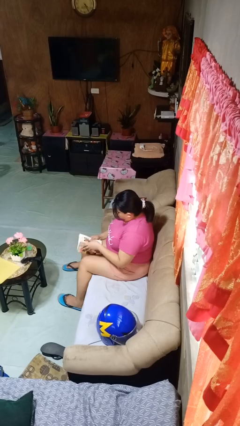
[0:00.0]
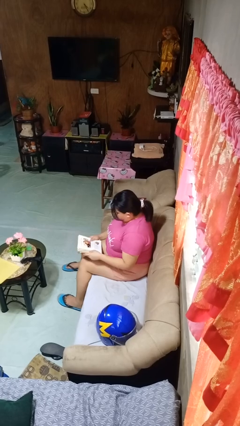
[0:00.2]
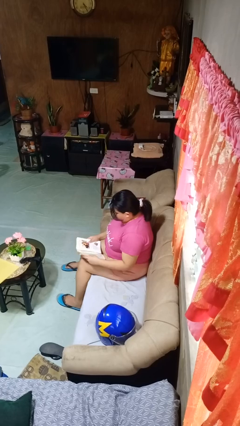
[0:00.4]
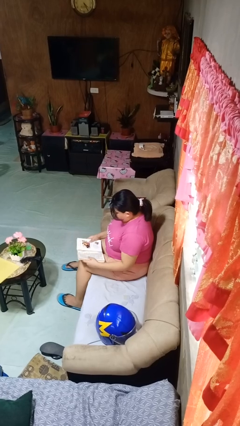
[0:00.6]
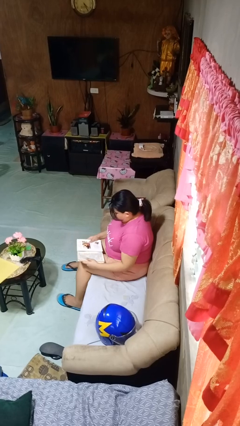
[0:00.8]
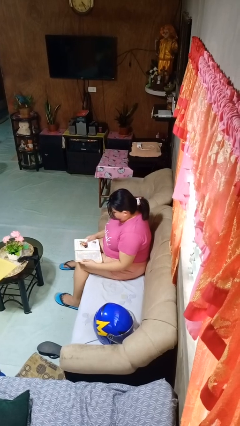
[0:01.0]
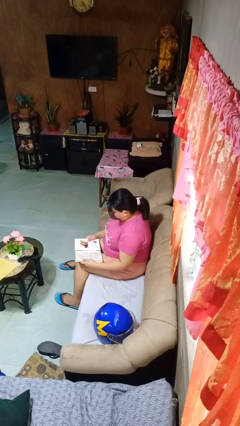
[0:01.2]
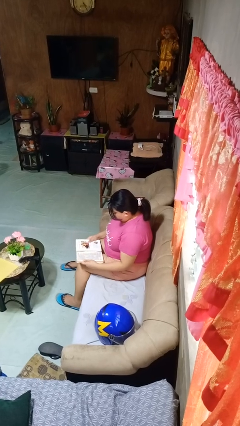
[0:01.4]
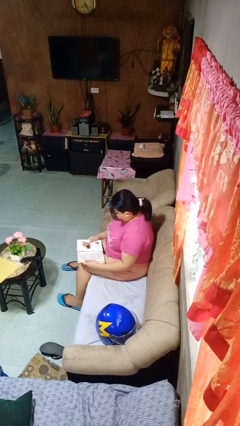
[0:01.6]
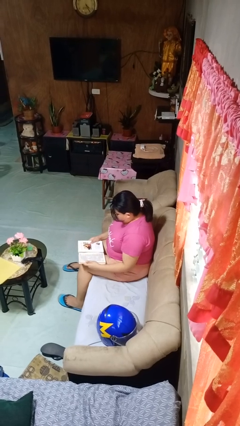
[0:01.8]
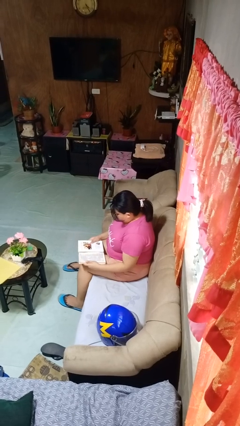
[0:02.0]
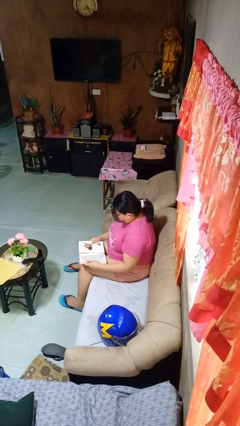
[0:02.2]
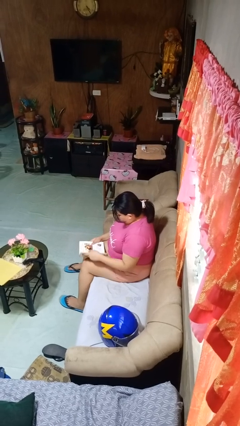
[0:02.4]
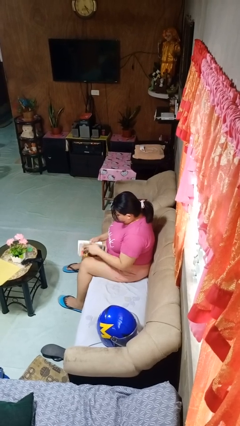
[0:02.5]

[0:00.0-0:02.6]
person reads book

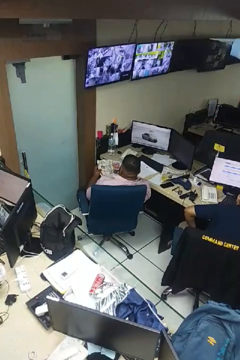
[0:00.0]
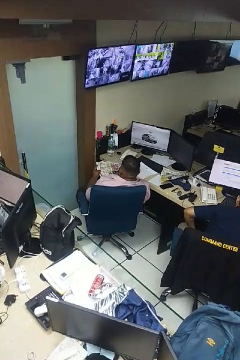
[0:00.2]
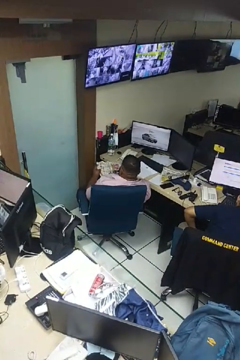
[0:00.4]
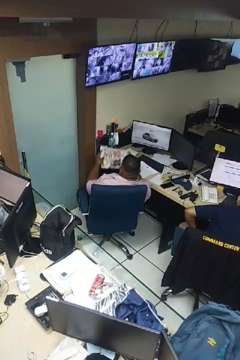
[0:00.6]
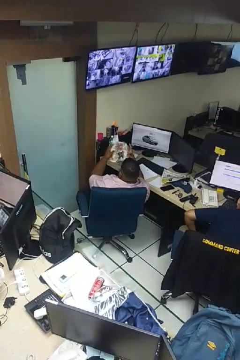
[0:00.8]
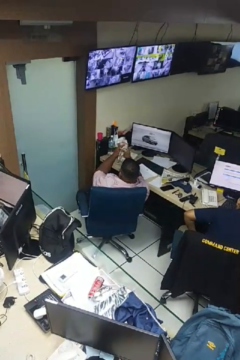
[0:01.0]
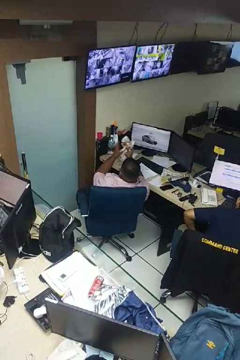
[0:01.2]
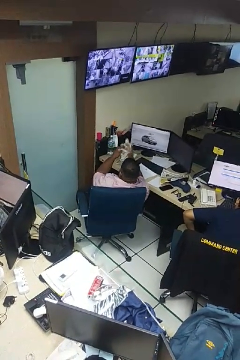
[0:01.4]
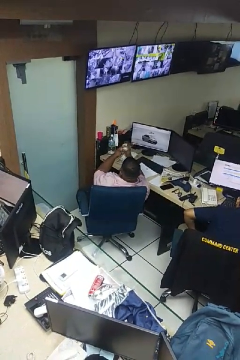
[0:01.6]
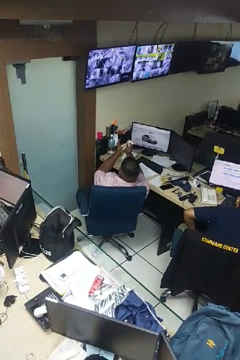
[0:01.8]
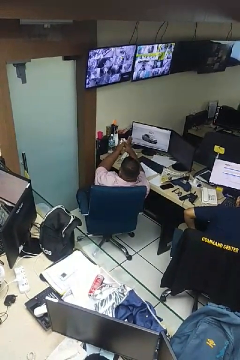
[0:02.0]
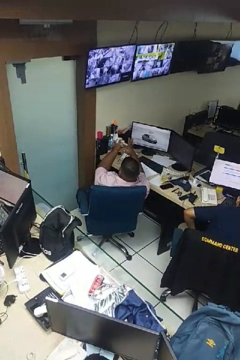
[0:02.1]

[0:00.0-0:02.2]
person crumples paper

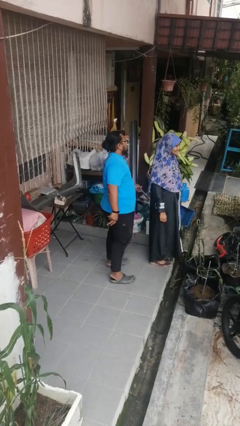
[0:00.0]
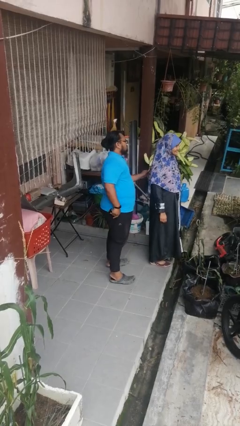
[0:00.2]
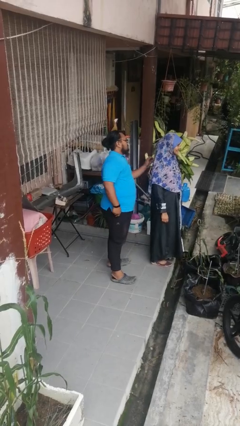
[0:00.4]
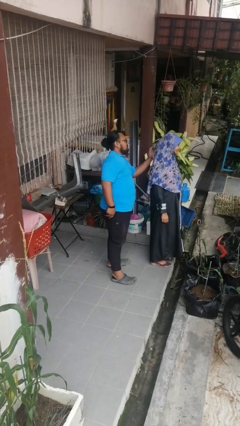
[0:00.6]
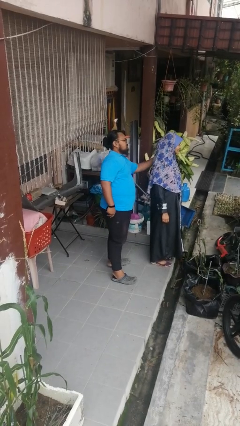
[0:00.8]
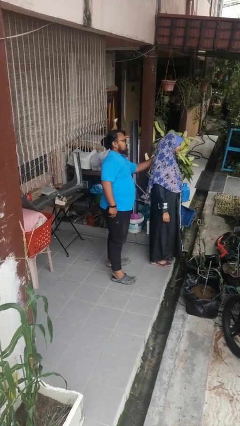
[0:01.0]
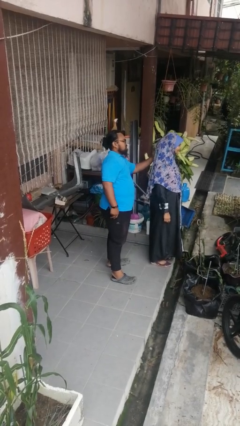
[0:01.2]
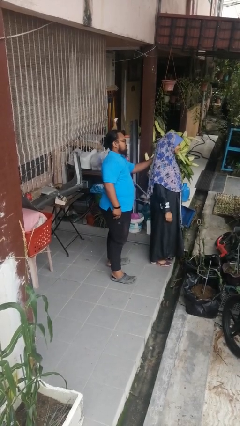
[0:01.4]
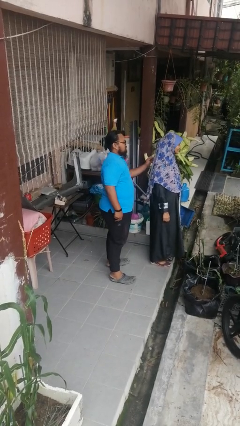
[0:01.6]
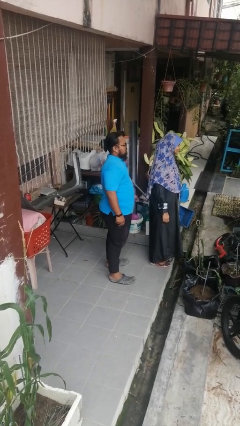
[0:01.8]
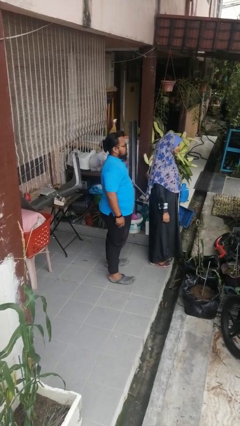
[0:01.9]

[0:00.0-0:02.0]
person touches back of person

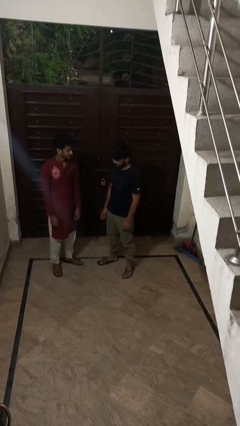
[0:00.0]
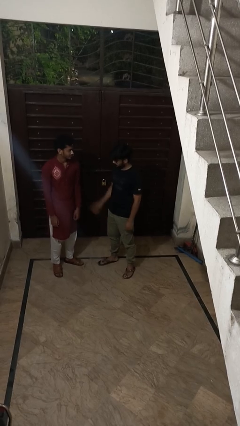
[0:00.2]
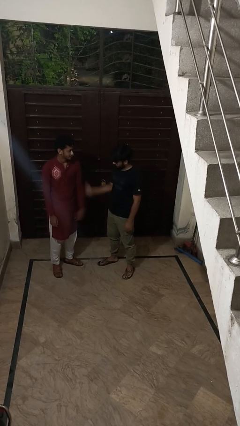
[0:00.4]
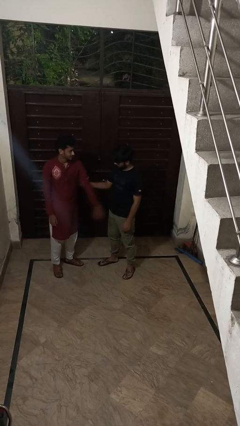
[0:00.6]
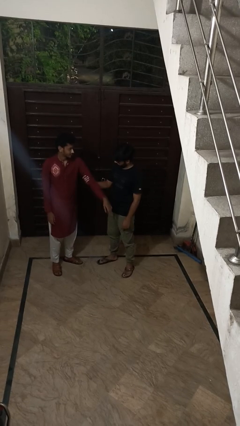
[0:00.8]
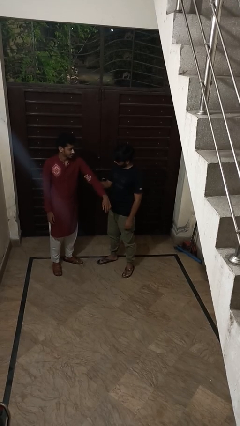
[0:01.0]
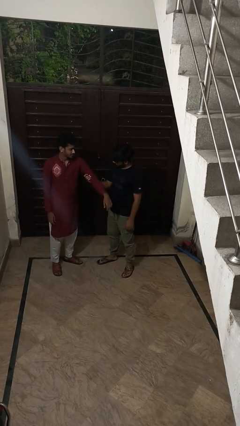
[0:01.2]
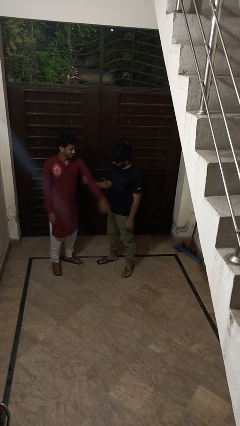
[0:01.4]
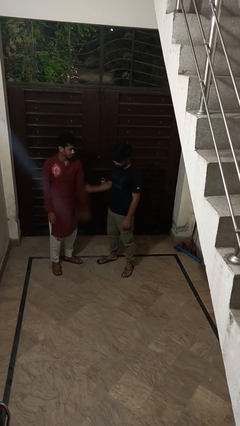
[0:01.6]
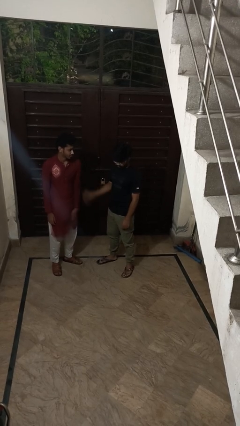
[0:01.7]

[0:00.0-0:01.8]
person grabs person by bicep

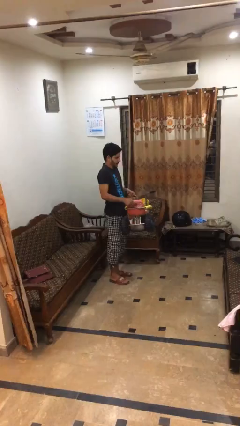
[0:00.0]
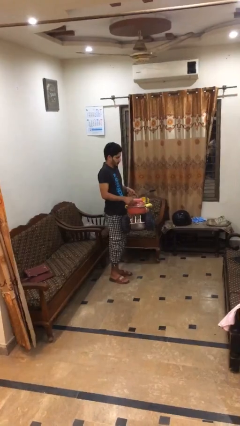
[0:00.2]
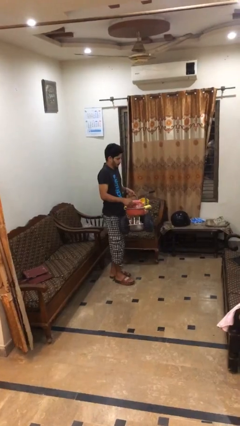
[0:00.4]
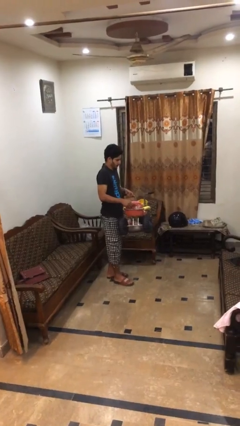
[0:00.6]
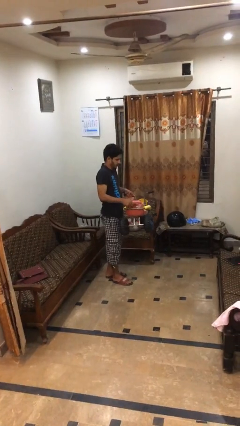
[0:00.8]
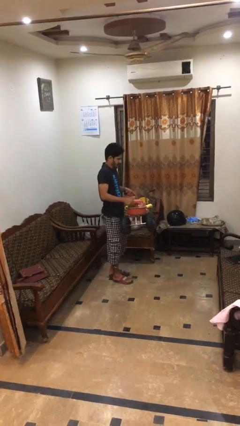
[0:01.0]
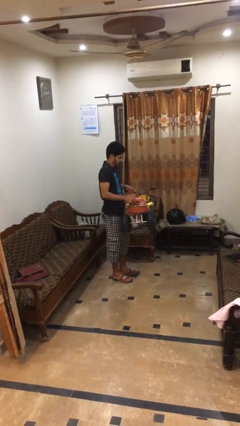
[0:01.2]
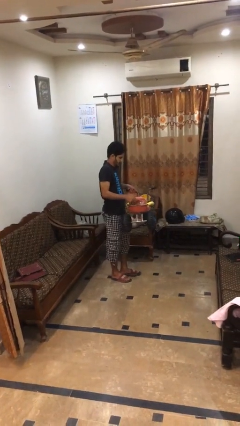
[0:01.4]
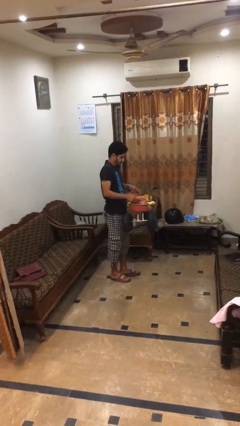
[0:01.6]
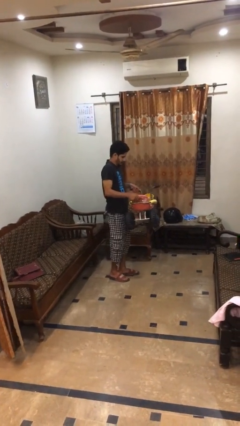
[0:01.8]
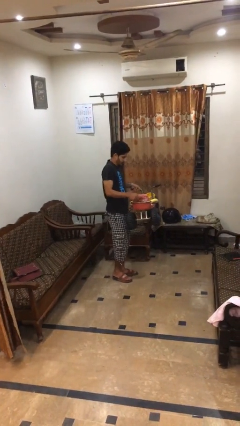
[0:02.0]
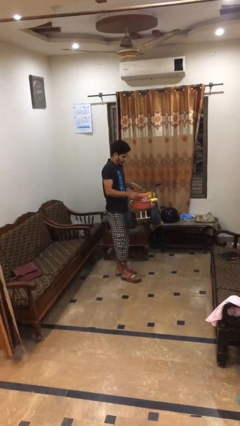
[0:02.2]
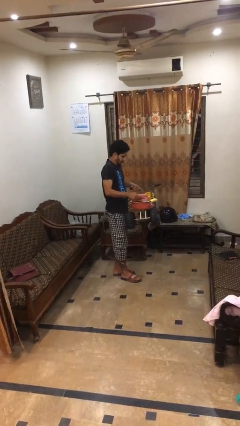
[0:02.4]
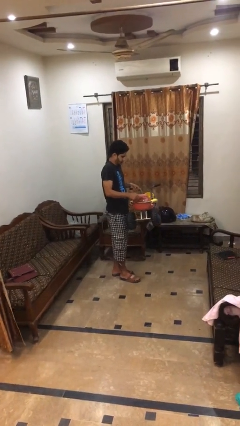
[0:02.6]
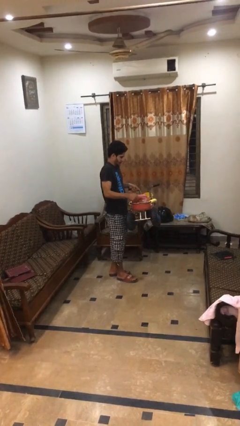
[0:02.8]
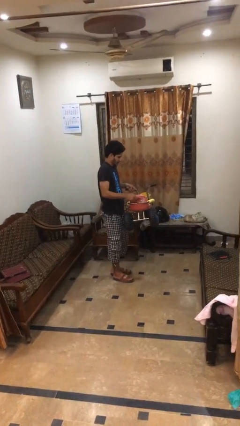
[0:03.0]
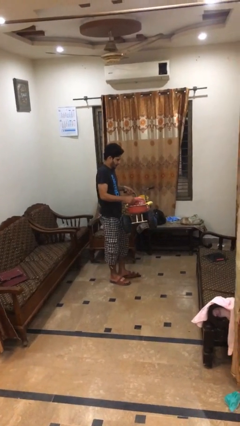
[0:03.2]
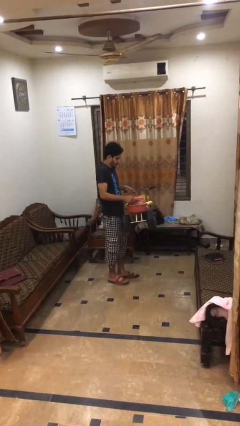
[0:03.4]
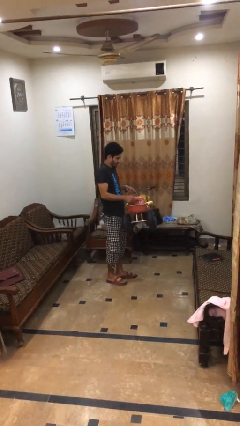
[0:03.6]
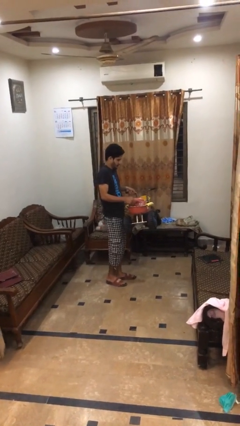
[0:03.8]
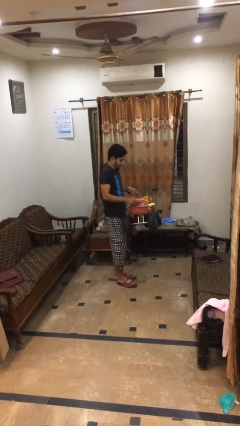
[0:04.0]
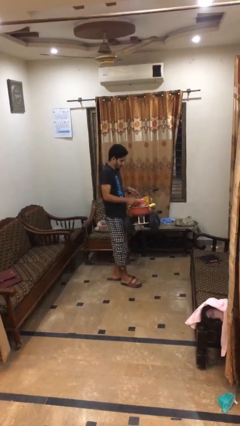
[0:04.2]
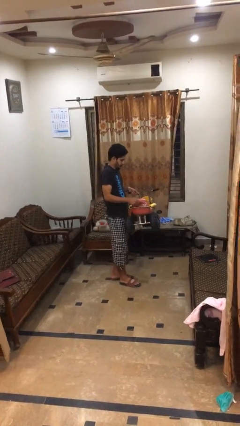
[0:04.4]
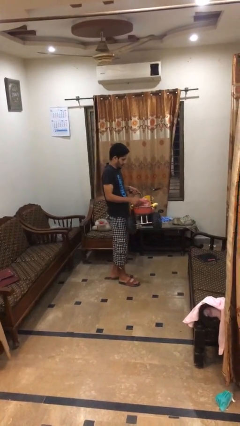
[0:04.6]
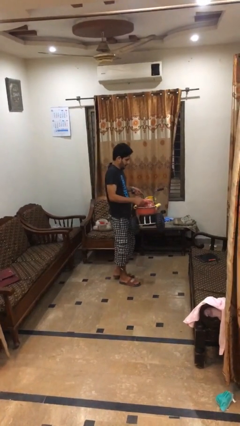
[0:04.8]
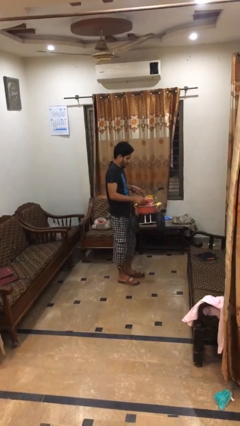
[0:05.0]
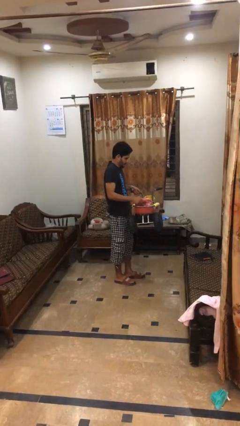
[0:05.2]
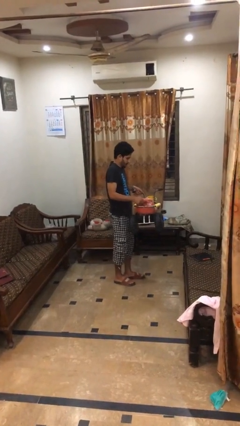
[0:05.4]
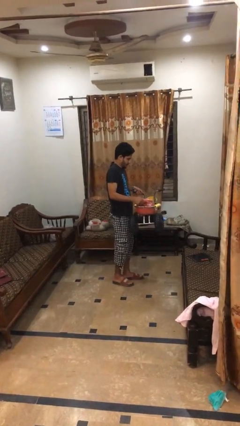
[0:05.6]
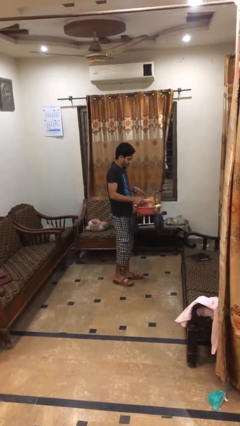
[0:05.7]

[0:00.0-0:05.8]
person carries heavy object

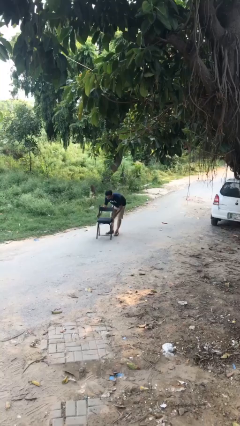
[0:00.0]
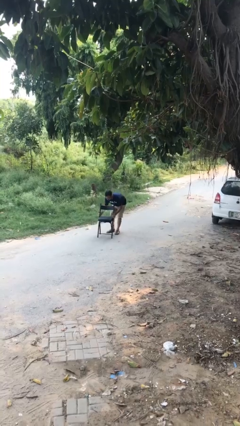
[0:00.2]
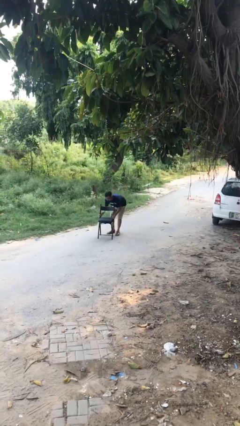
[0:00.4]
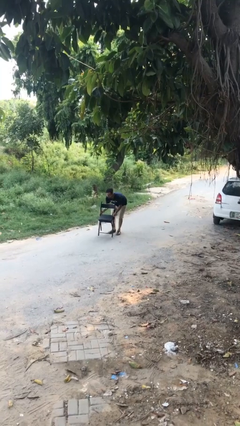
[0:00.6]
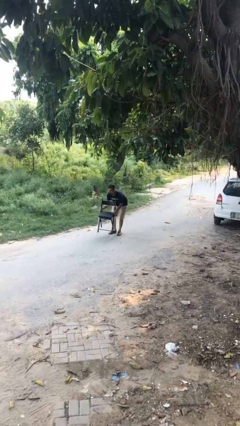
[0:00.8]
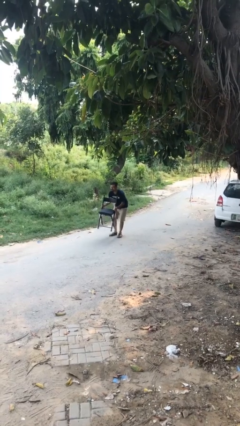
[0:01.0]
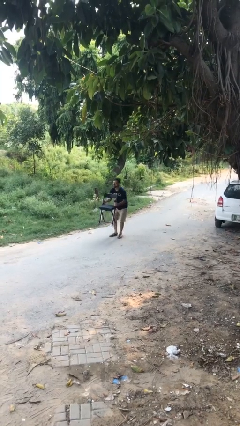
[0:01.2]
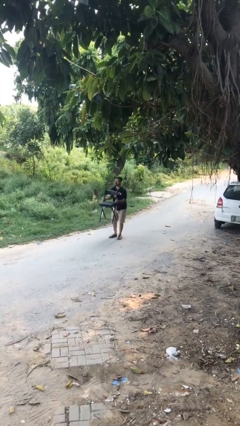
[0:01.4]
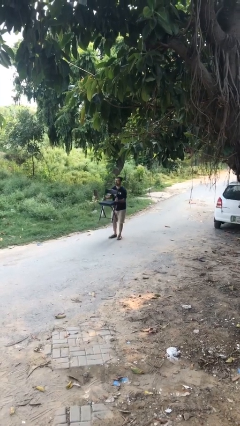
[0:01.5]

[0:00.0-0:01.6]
person picks up object from floor

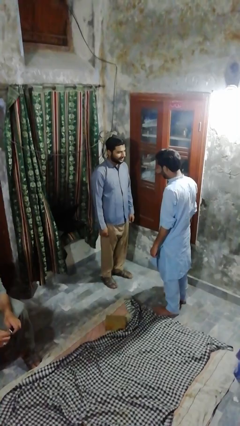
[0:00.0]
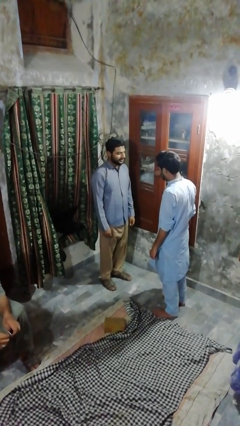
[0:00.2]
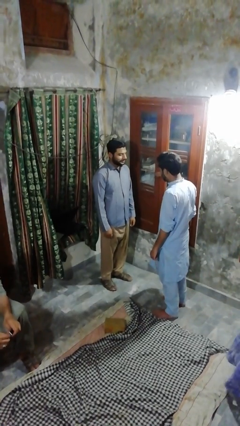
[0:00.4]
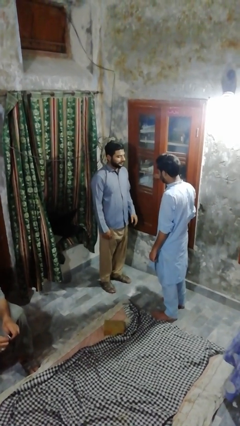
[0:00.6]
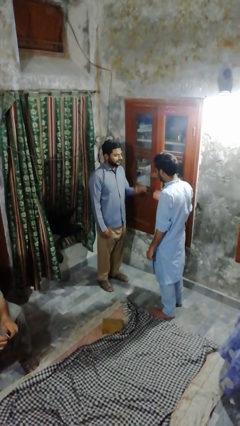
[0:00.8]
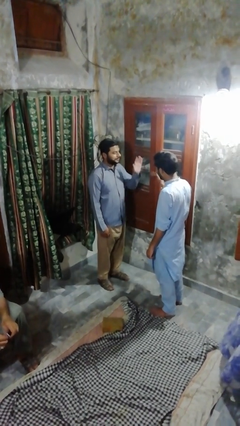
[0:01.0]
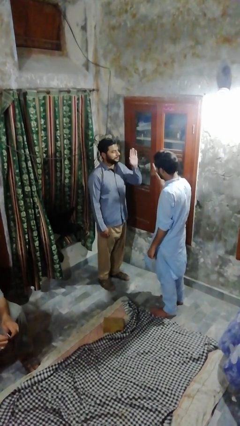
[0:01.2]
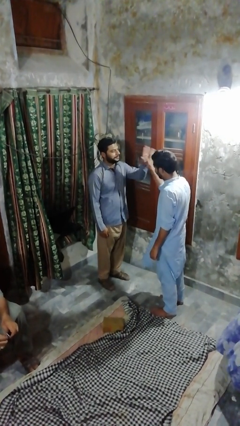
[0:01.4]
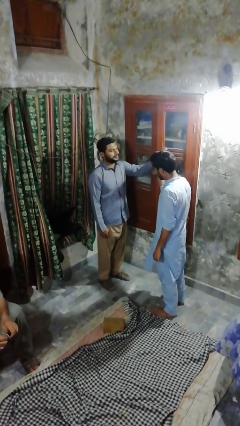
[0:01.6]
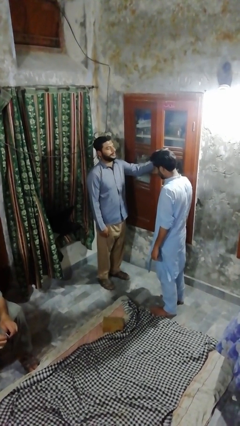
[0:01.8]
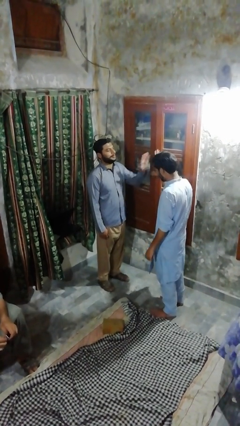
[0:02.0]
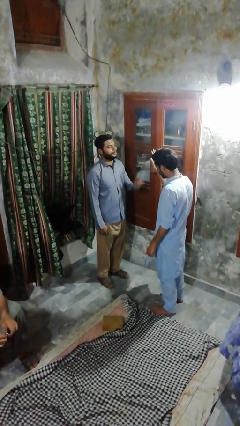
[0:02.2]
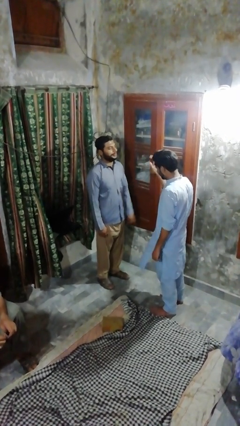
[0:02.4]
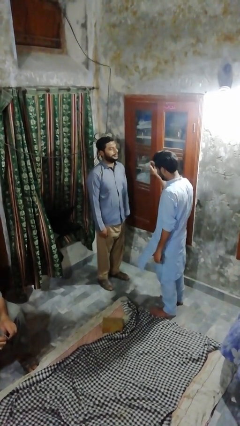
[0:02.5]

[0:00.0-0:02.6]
person highfives hand
